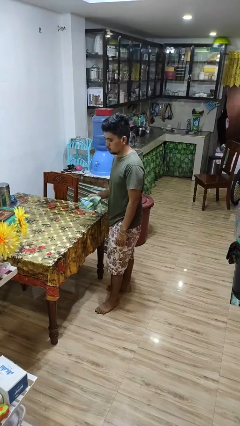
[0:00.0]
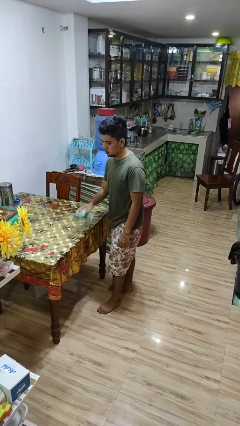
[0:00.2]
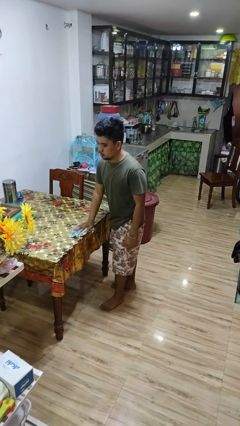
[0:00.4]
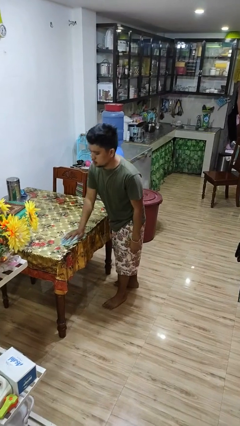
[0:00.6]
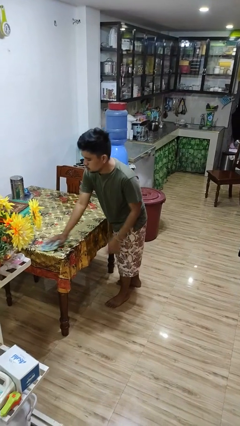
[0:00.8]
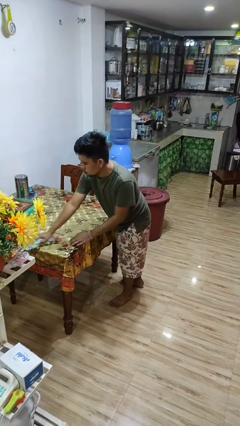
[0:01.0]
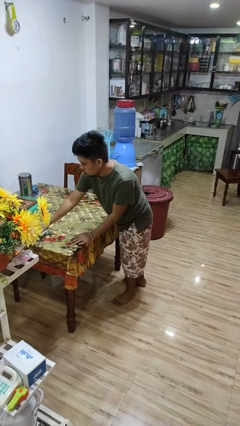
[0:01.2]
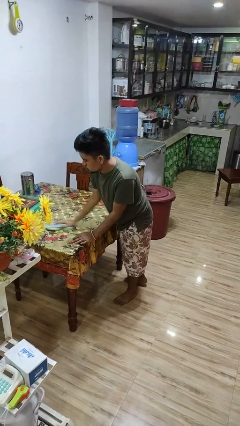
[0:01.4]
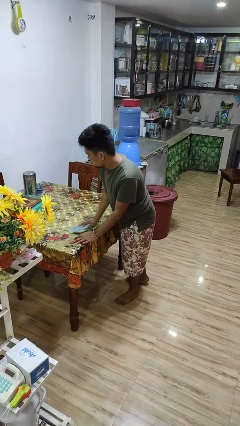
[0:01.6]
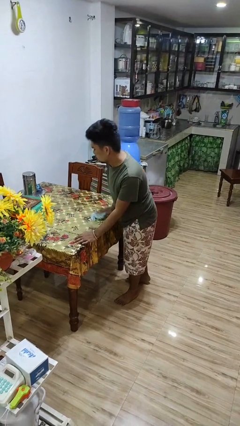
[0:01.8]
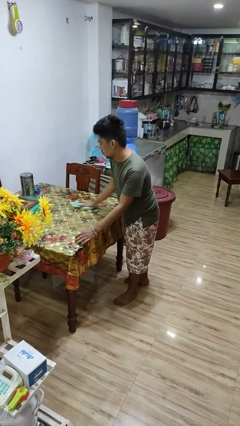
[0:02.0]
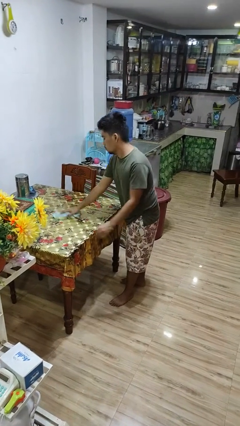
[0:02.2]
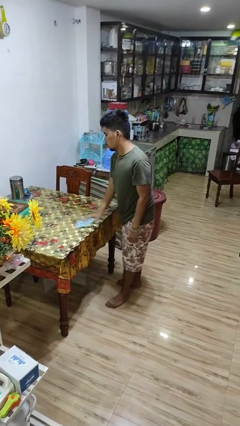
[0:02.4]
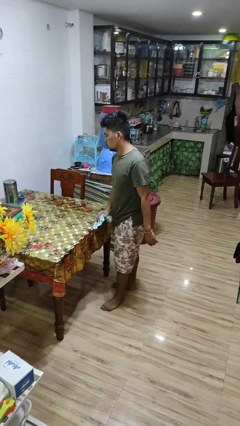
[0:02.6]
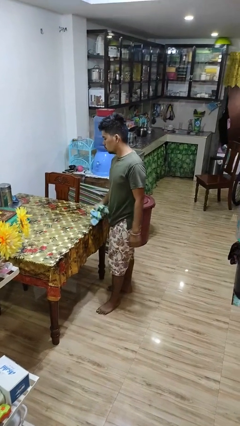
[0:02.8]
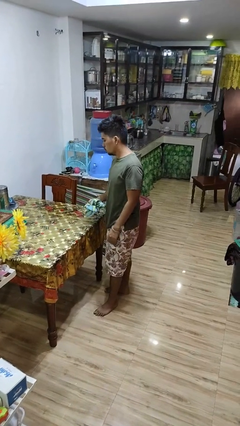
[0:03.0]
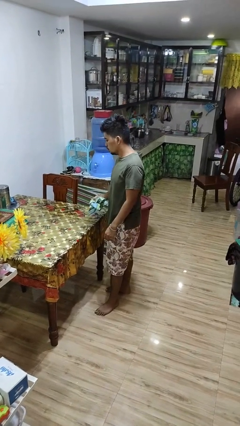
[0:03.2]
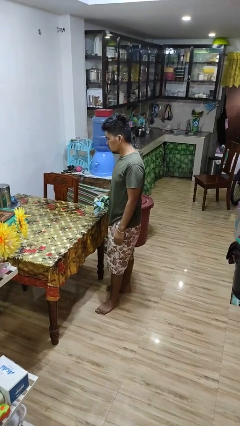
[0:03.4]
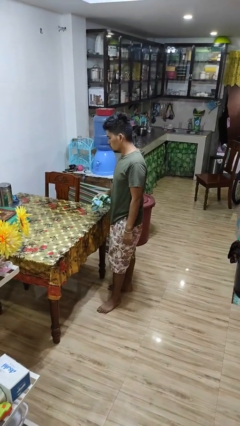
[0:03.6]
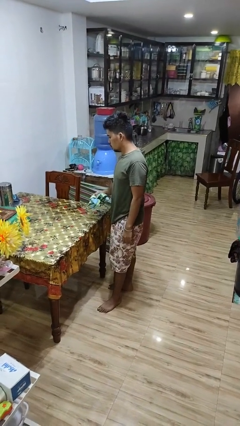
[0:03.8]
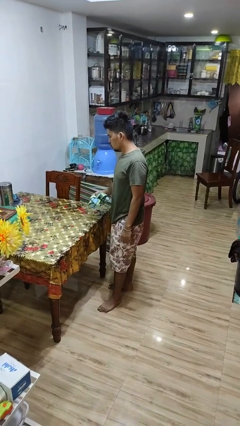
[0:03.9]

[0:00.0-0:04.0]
person cleans table with rag

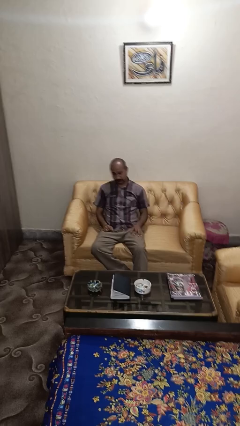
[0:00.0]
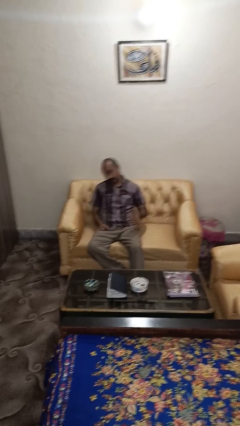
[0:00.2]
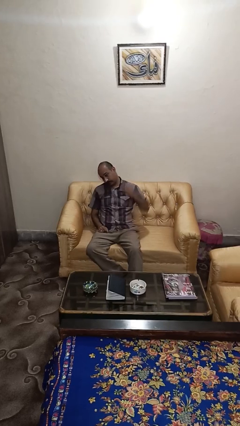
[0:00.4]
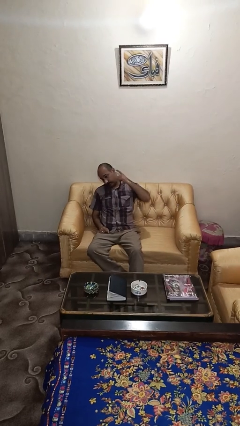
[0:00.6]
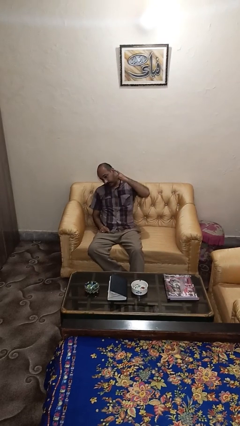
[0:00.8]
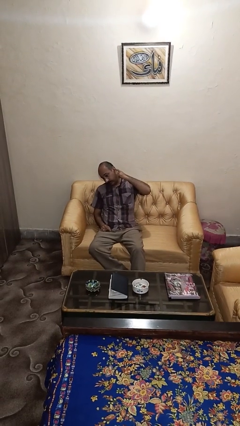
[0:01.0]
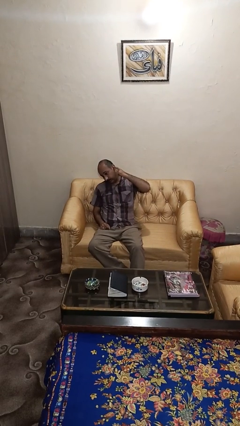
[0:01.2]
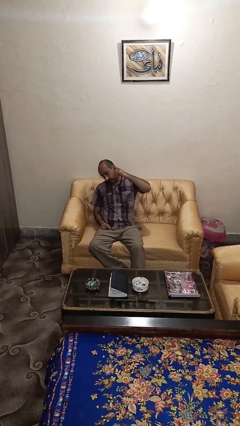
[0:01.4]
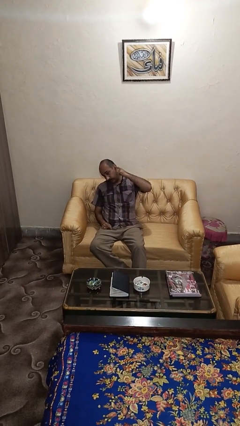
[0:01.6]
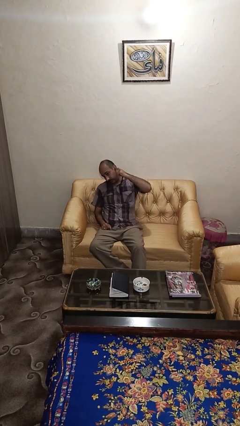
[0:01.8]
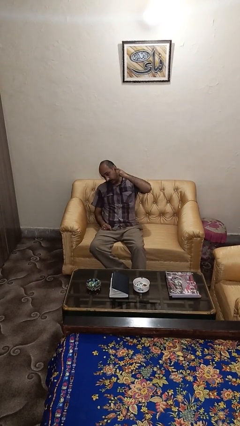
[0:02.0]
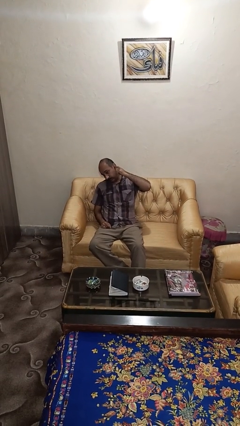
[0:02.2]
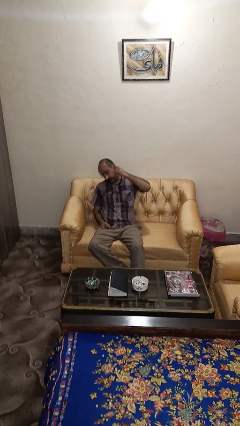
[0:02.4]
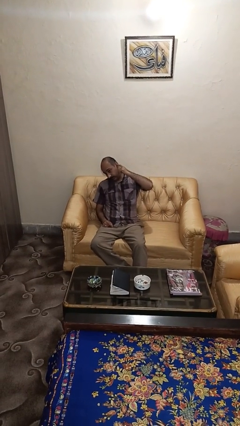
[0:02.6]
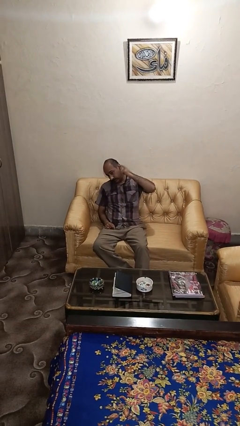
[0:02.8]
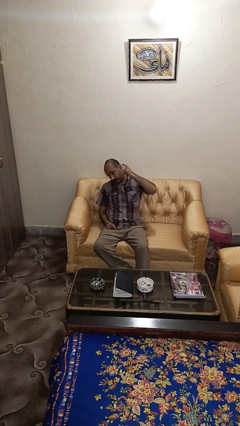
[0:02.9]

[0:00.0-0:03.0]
person gestures listen closely

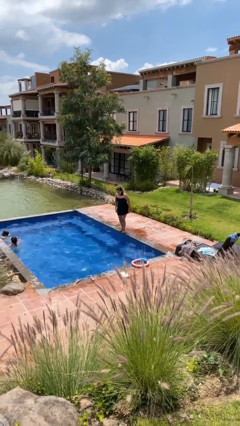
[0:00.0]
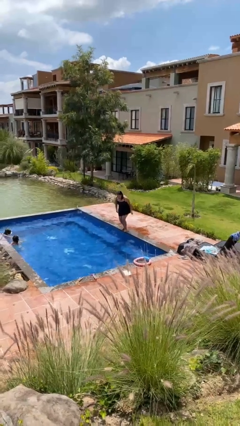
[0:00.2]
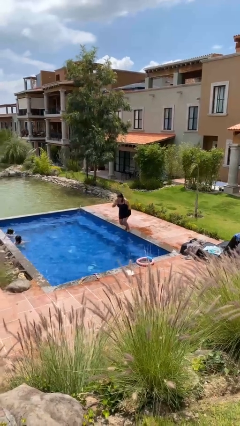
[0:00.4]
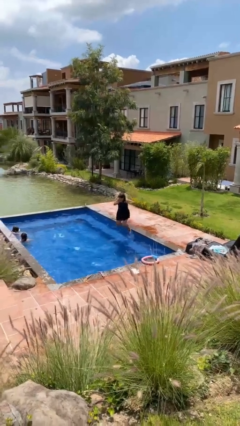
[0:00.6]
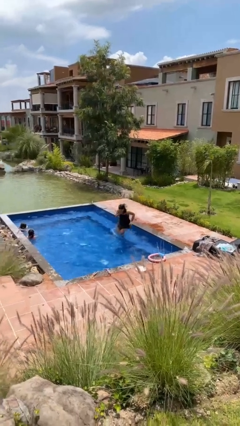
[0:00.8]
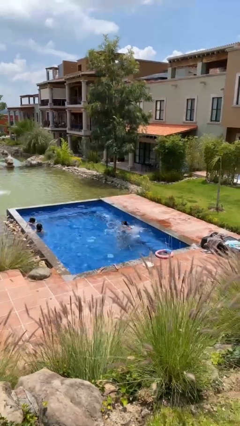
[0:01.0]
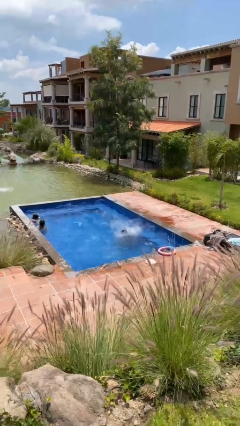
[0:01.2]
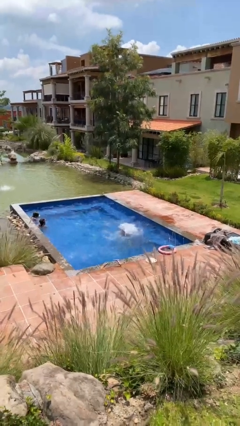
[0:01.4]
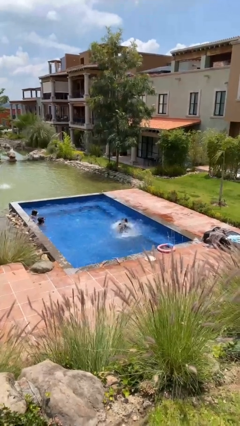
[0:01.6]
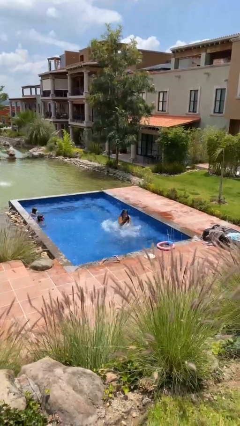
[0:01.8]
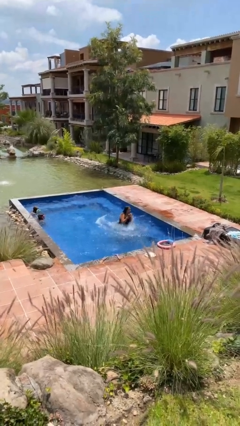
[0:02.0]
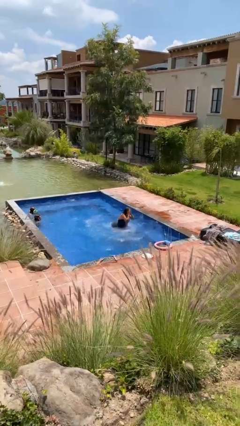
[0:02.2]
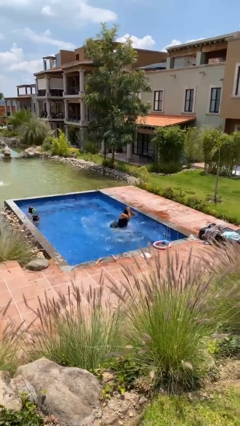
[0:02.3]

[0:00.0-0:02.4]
person jumps into pool

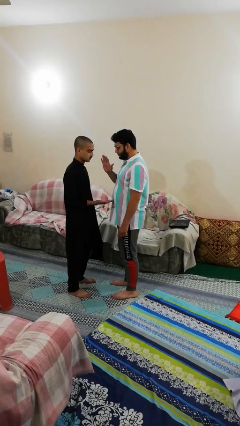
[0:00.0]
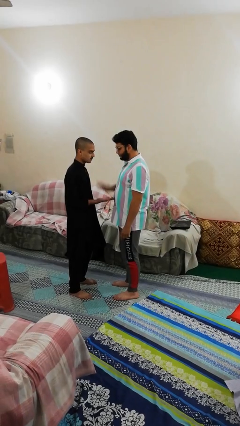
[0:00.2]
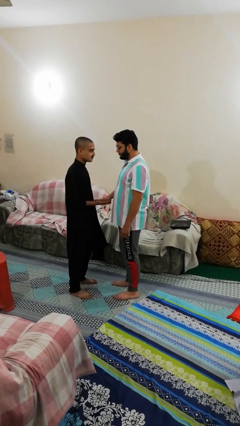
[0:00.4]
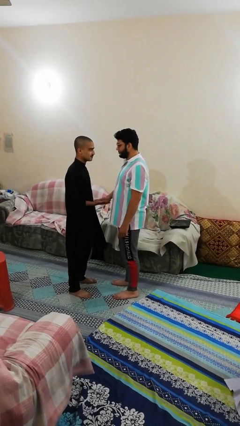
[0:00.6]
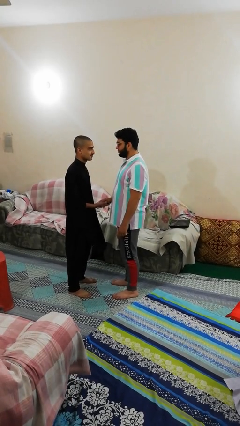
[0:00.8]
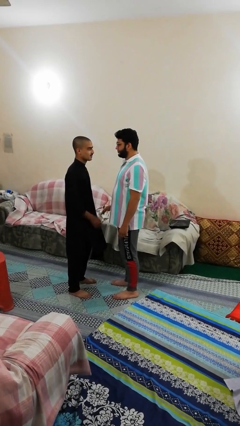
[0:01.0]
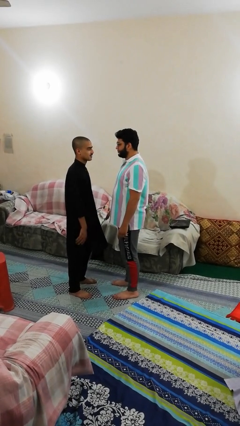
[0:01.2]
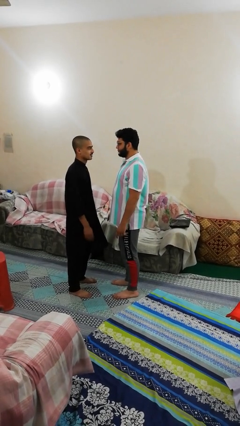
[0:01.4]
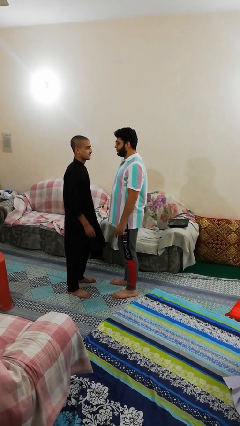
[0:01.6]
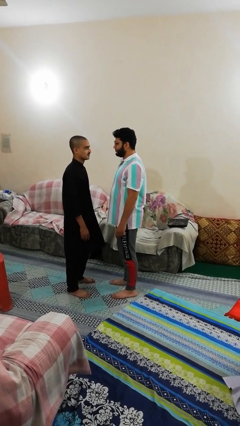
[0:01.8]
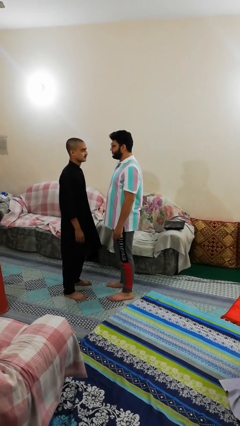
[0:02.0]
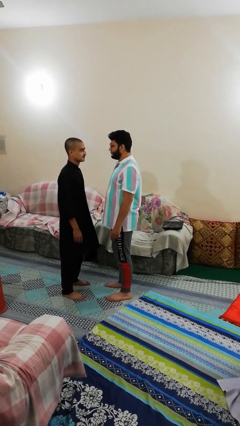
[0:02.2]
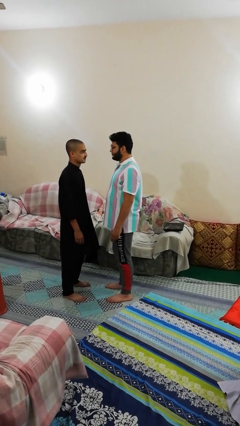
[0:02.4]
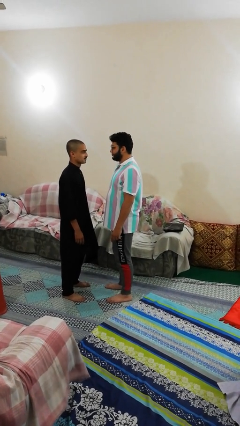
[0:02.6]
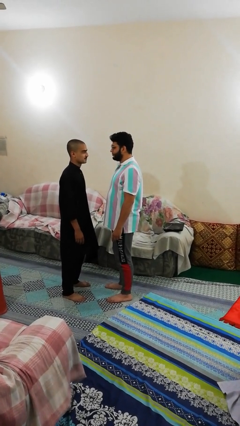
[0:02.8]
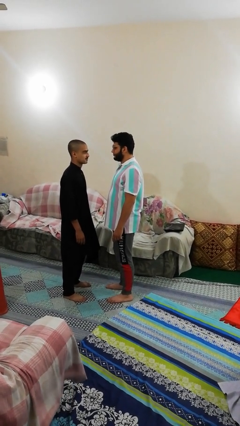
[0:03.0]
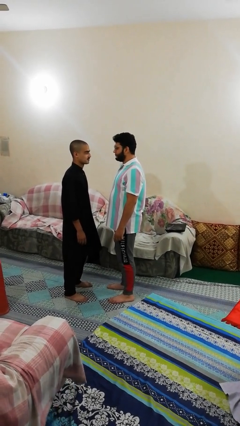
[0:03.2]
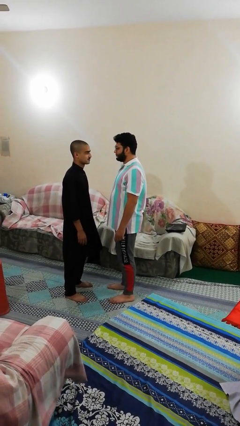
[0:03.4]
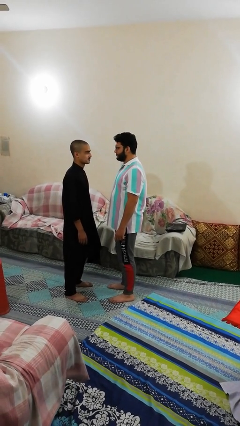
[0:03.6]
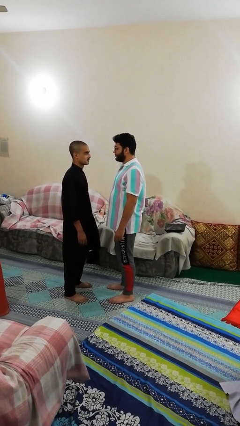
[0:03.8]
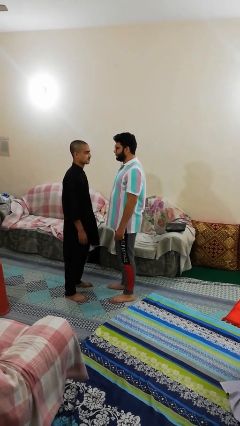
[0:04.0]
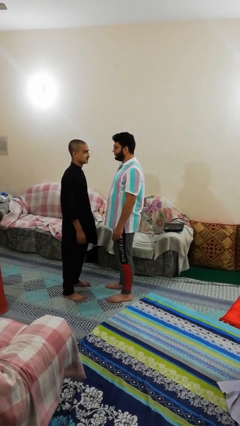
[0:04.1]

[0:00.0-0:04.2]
person highfives hand

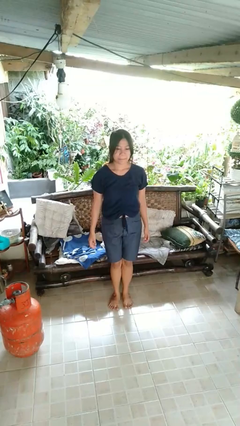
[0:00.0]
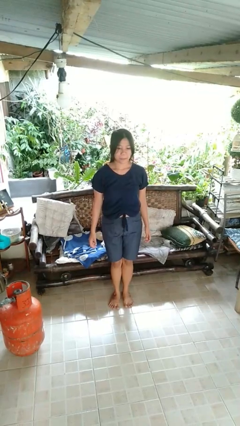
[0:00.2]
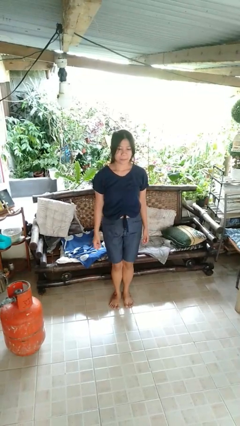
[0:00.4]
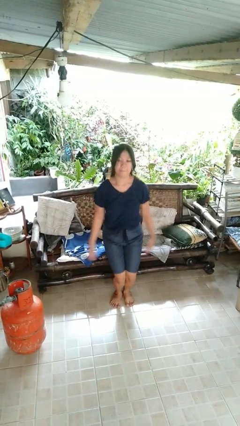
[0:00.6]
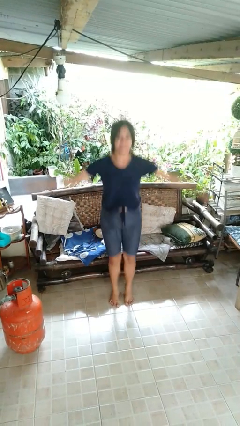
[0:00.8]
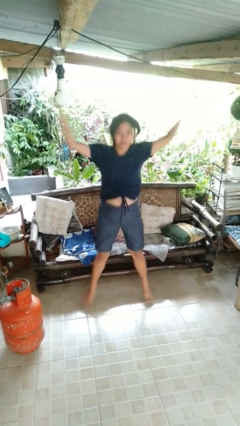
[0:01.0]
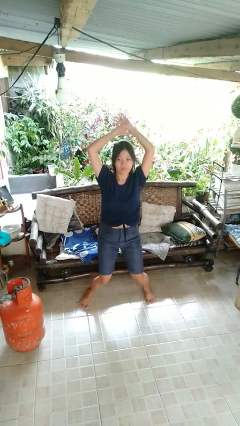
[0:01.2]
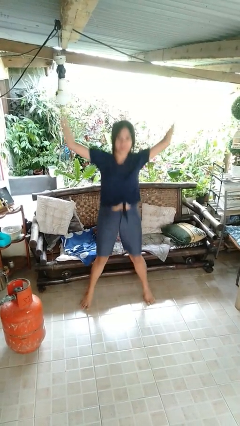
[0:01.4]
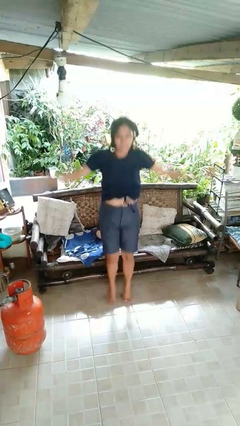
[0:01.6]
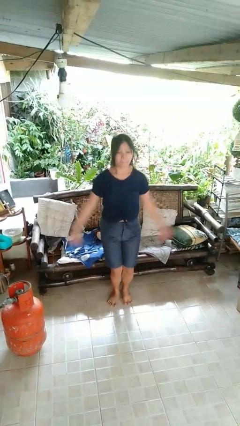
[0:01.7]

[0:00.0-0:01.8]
person exercises with jumping jacks

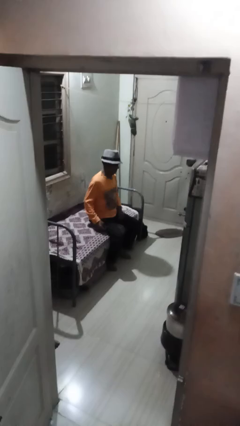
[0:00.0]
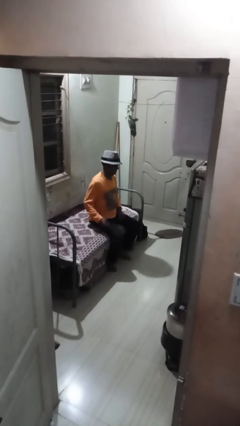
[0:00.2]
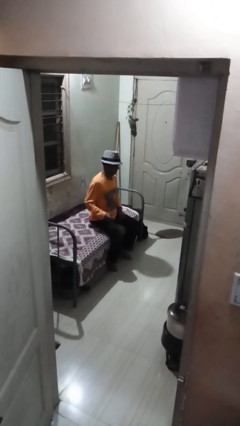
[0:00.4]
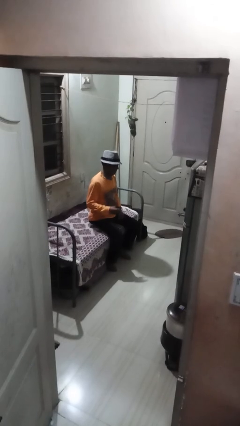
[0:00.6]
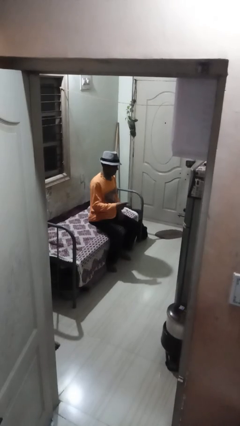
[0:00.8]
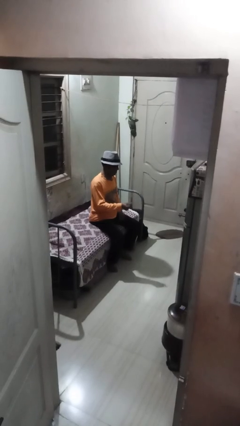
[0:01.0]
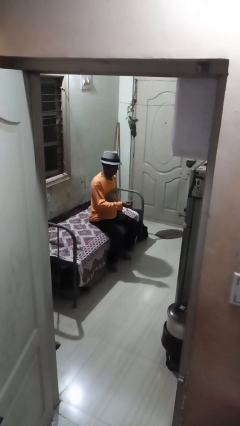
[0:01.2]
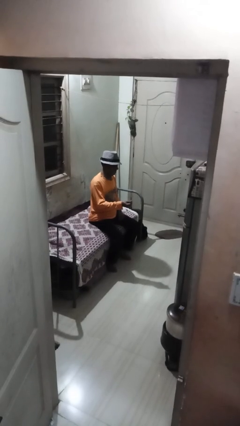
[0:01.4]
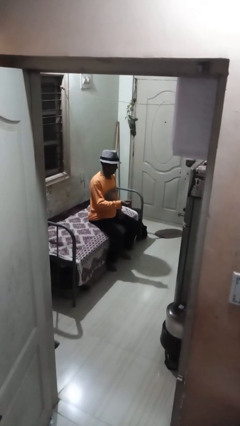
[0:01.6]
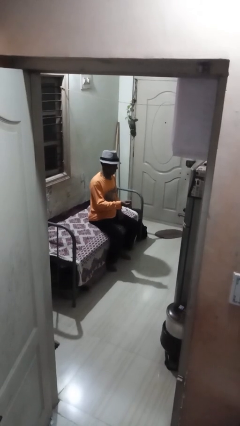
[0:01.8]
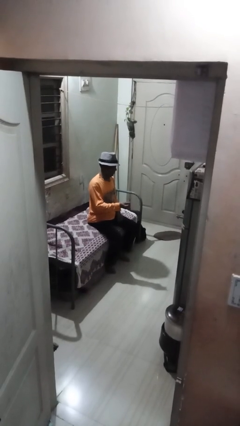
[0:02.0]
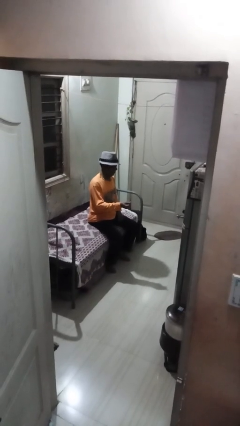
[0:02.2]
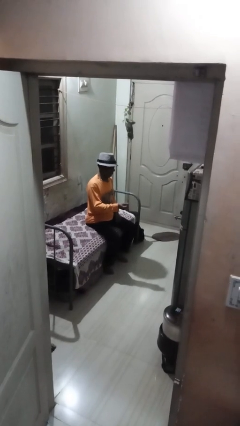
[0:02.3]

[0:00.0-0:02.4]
person snaps fingers
